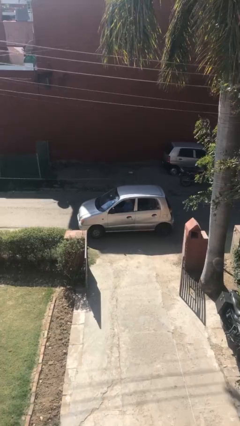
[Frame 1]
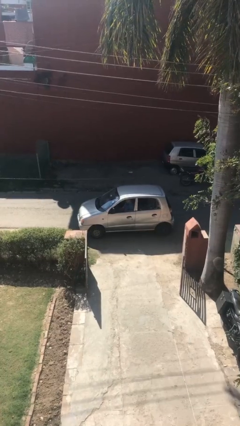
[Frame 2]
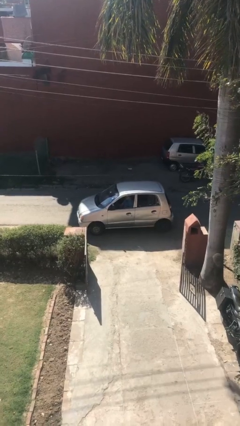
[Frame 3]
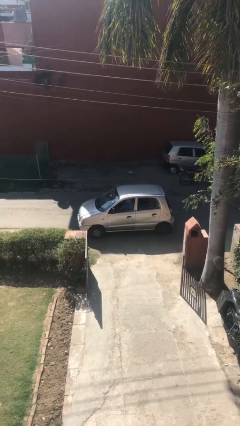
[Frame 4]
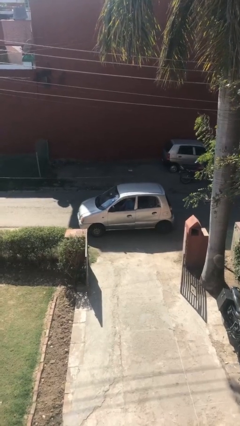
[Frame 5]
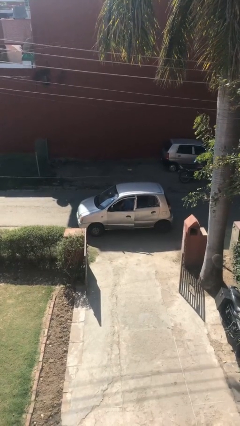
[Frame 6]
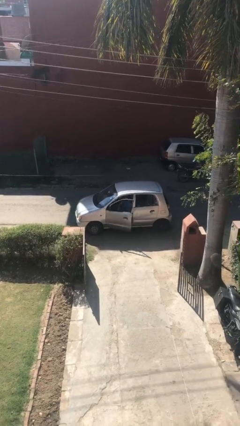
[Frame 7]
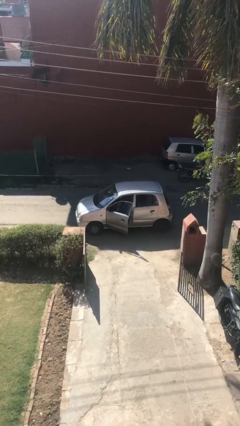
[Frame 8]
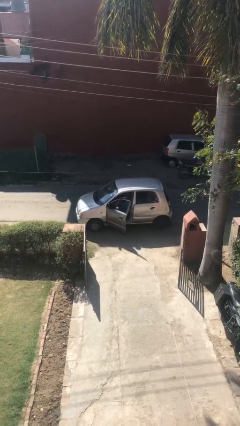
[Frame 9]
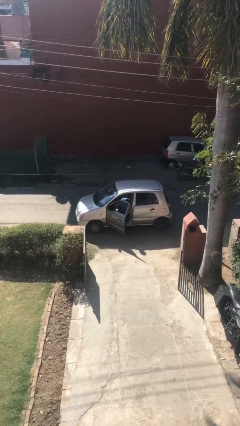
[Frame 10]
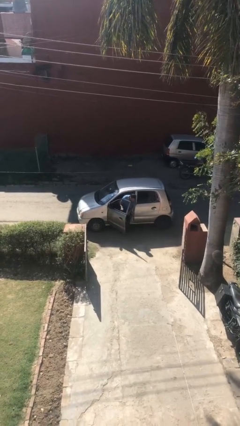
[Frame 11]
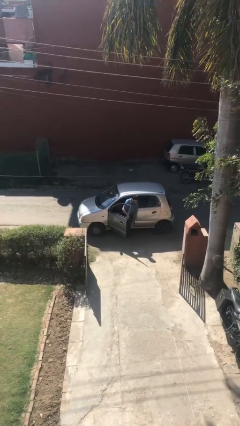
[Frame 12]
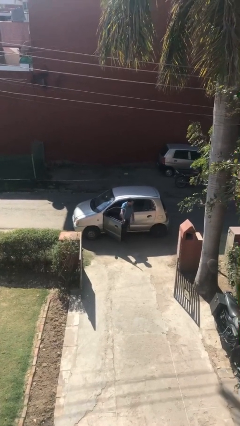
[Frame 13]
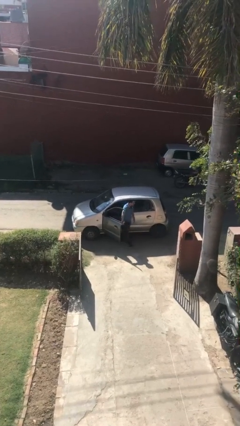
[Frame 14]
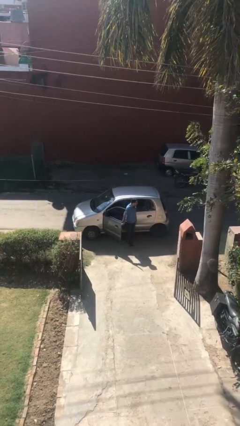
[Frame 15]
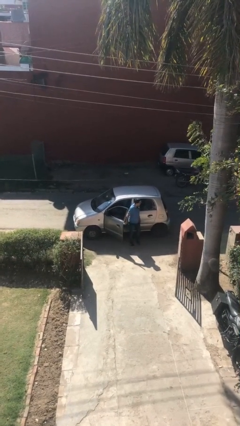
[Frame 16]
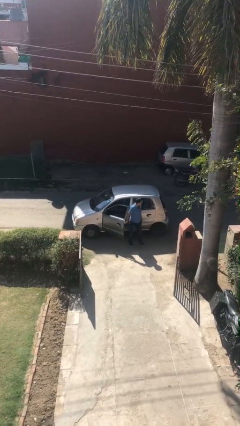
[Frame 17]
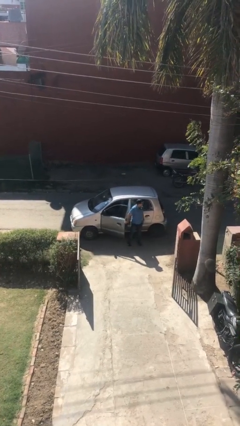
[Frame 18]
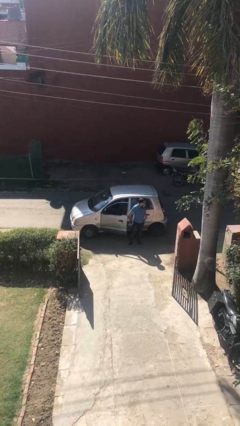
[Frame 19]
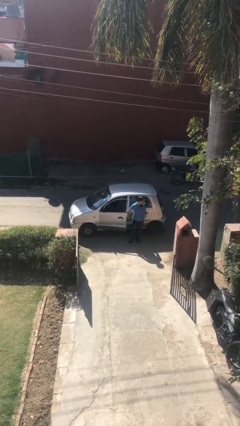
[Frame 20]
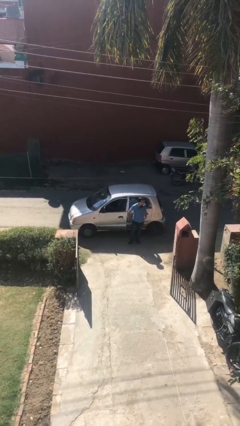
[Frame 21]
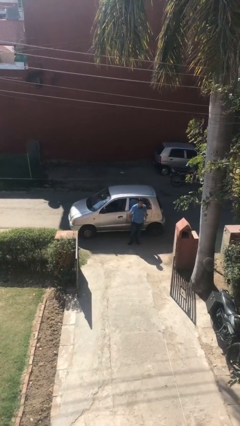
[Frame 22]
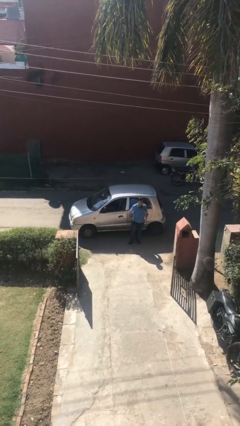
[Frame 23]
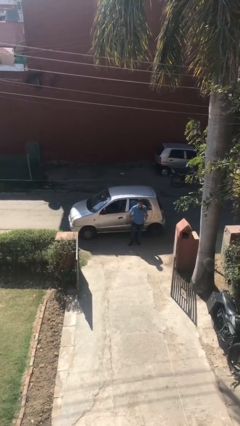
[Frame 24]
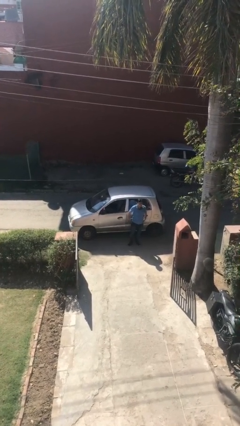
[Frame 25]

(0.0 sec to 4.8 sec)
car drops off person

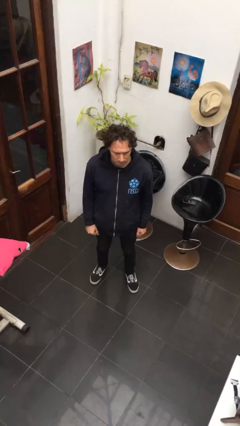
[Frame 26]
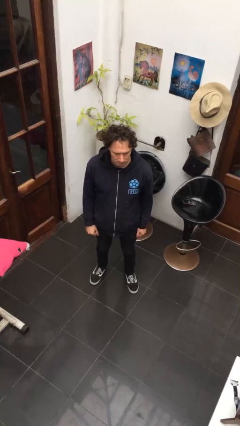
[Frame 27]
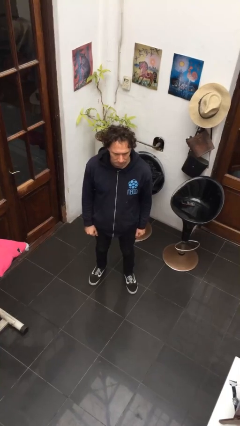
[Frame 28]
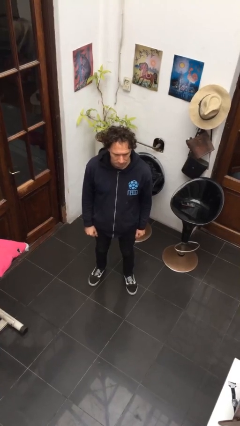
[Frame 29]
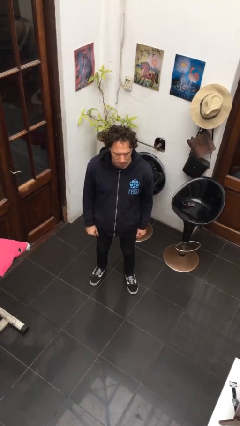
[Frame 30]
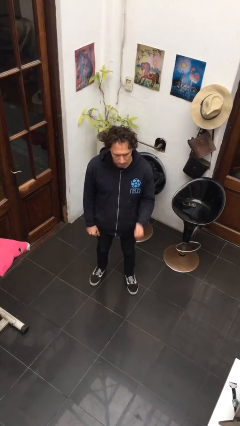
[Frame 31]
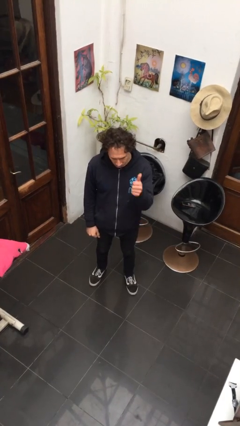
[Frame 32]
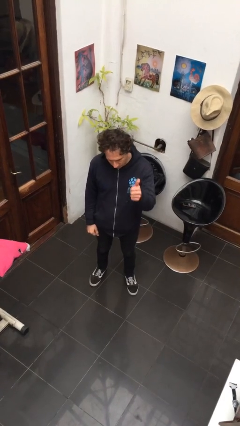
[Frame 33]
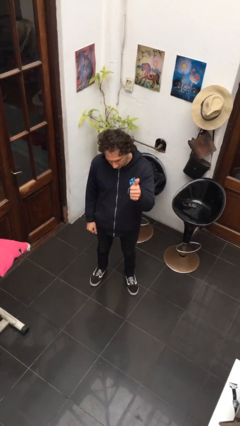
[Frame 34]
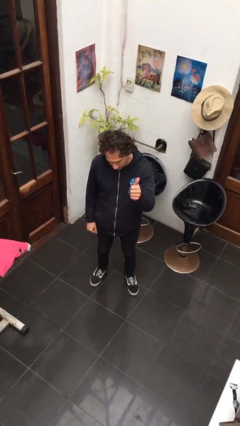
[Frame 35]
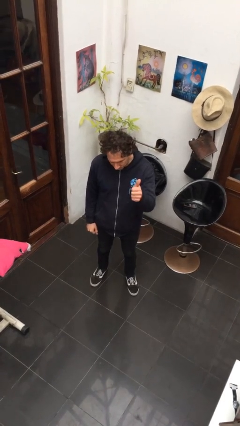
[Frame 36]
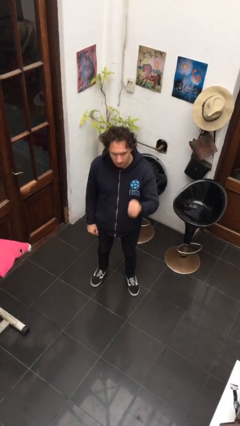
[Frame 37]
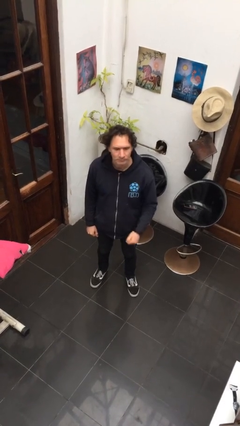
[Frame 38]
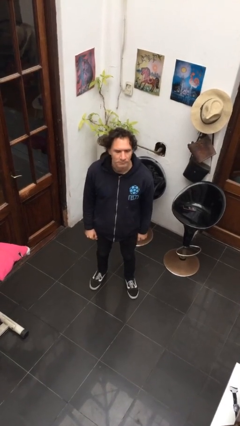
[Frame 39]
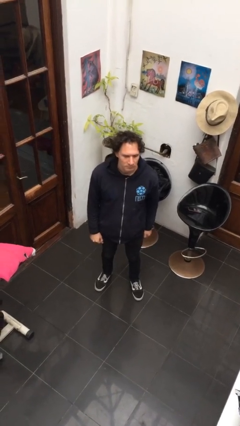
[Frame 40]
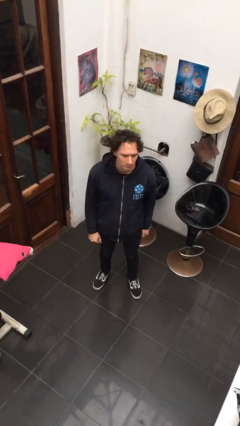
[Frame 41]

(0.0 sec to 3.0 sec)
person gestures thumbs up

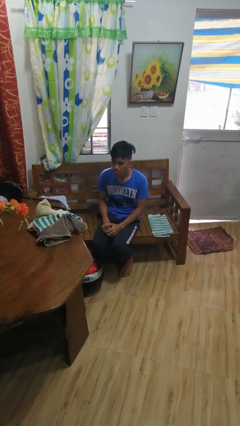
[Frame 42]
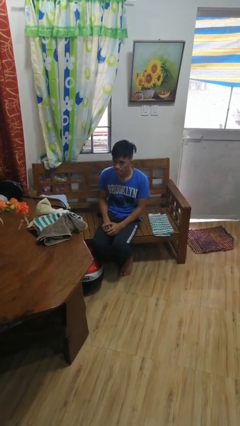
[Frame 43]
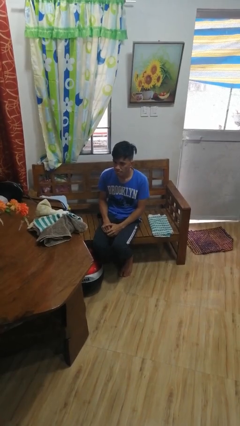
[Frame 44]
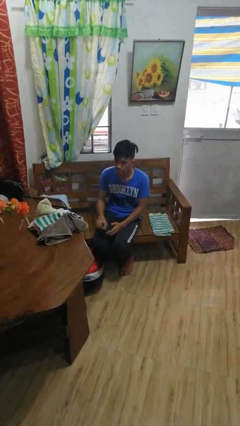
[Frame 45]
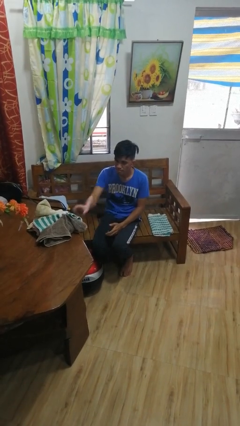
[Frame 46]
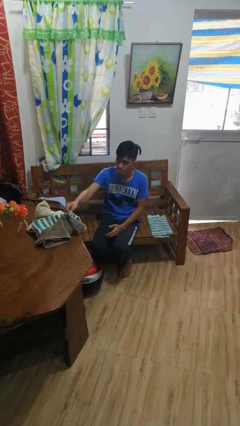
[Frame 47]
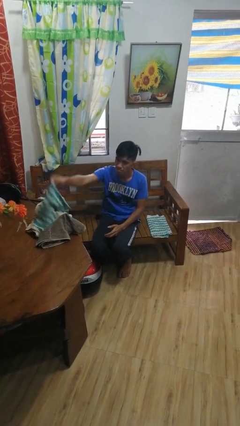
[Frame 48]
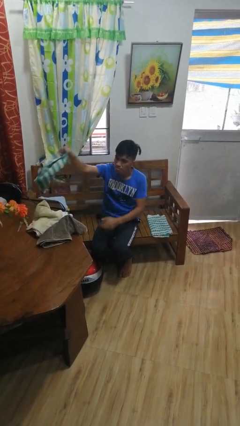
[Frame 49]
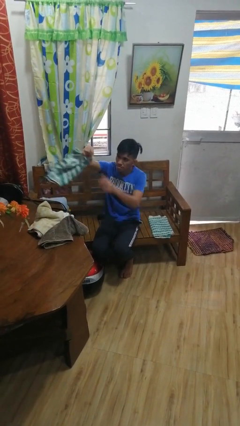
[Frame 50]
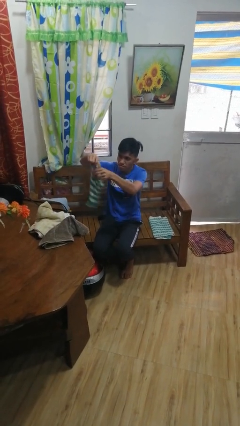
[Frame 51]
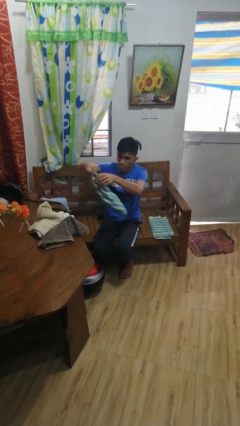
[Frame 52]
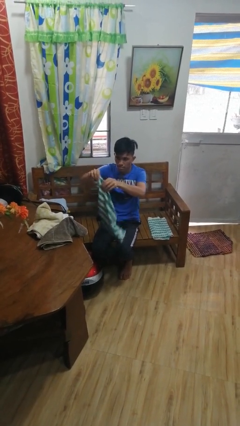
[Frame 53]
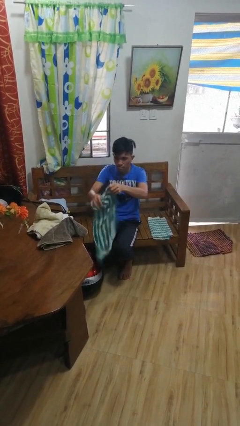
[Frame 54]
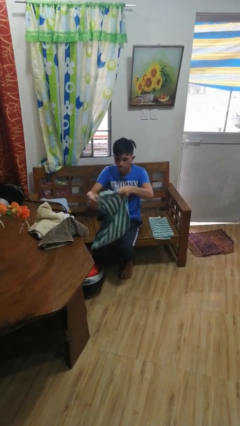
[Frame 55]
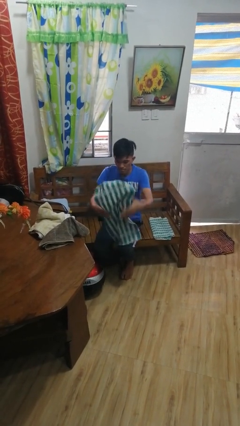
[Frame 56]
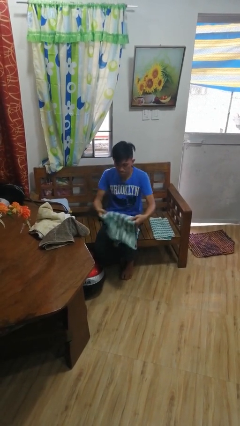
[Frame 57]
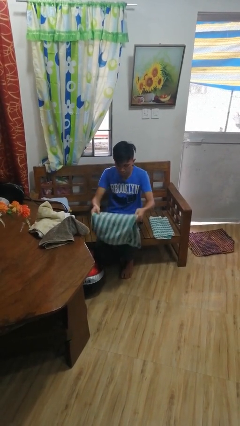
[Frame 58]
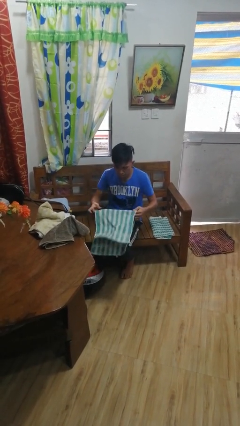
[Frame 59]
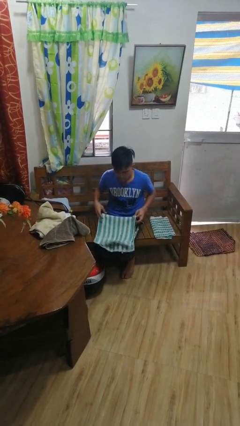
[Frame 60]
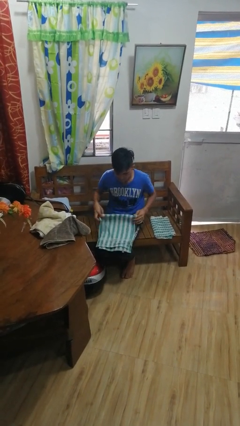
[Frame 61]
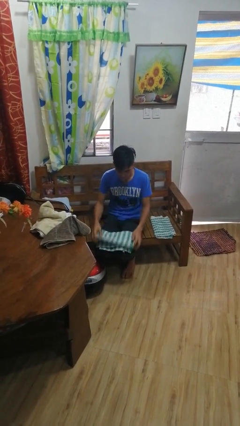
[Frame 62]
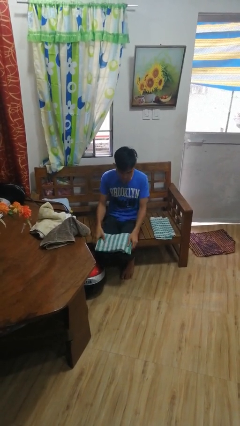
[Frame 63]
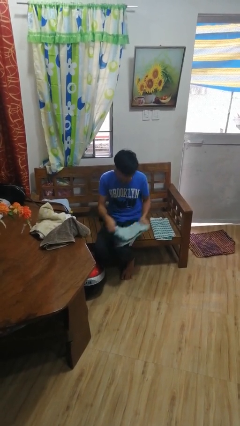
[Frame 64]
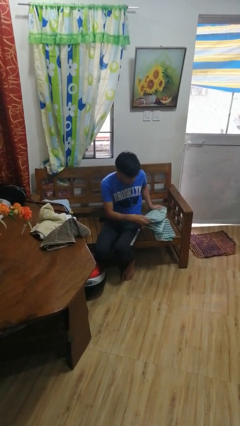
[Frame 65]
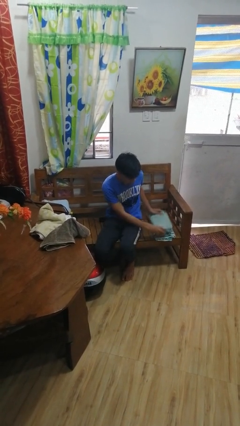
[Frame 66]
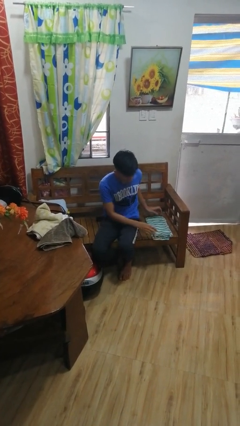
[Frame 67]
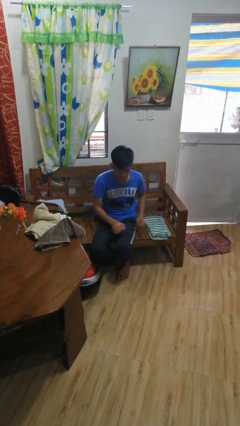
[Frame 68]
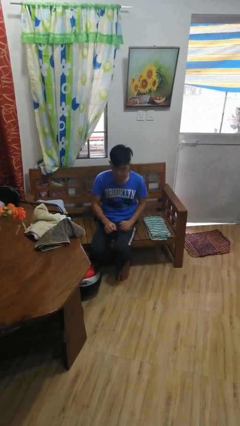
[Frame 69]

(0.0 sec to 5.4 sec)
person folds towel

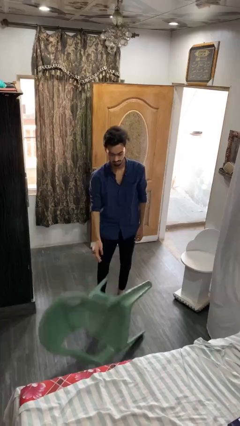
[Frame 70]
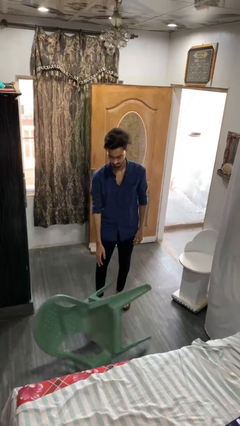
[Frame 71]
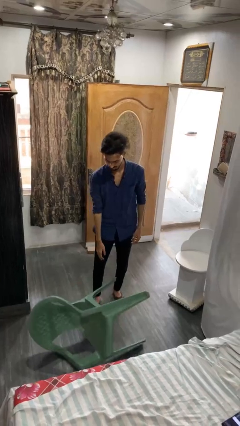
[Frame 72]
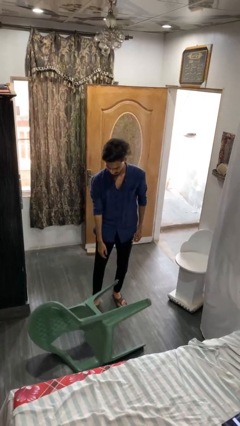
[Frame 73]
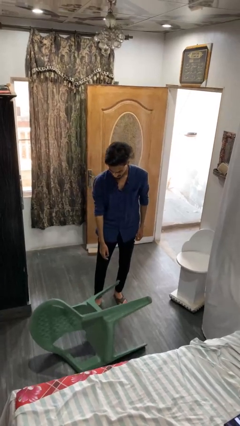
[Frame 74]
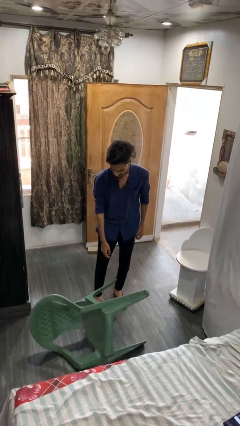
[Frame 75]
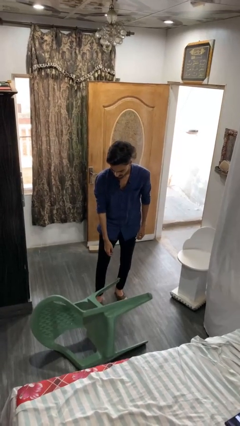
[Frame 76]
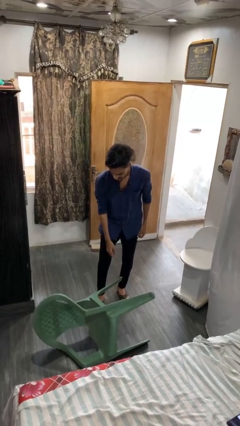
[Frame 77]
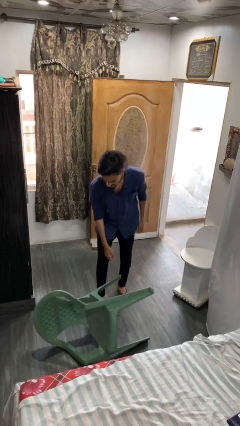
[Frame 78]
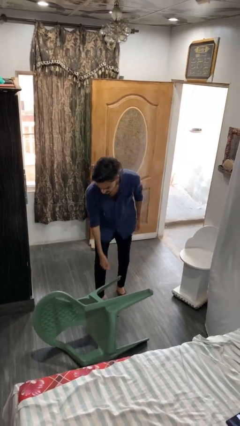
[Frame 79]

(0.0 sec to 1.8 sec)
person knocks over furniture

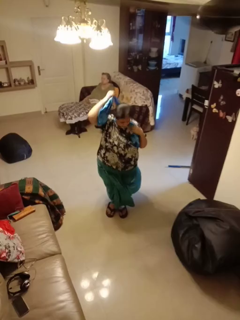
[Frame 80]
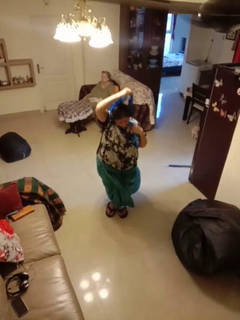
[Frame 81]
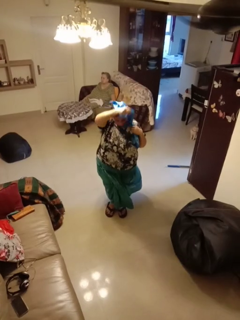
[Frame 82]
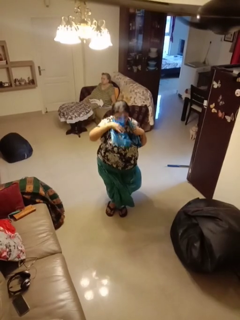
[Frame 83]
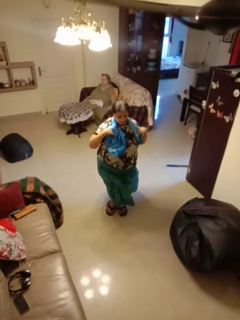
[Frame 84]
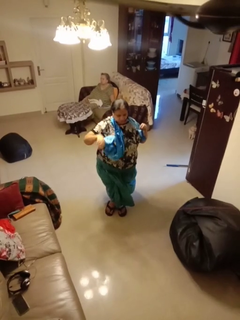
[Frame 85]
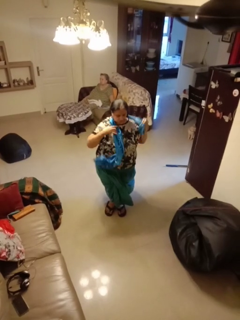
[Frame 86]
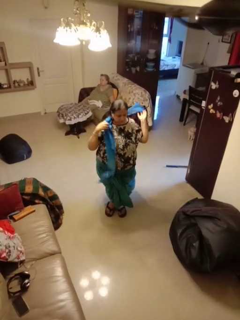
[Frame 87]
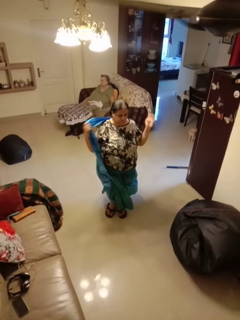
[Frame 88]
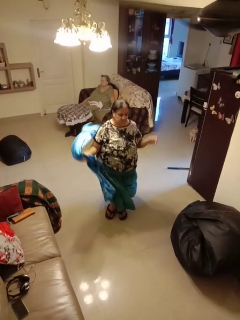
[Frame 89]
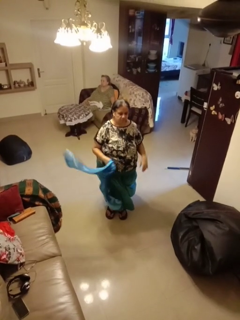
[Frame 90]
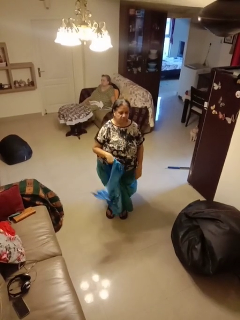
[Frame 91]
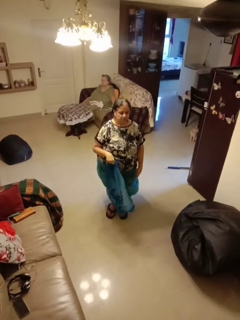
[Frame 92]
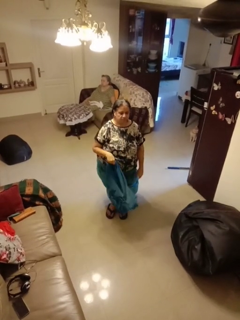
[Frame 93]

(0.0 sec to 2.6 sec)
person takes off scarf
